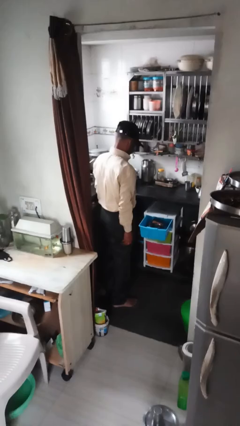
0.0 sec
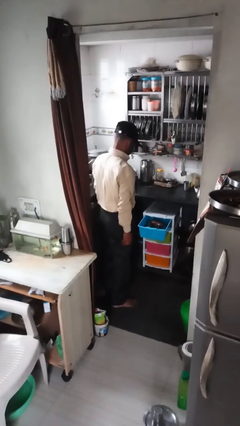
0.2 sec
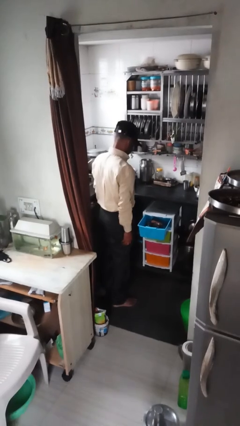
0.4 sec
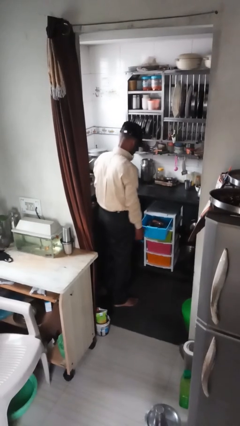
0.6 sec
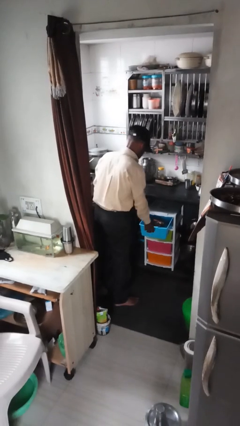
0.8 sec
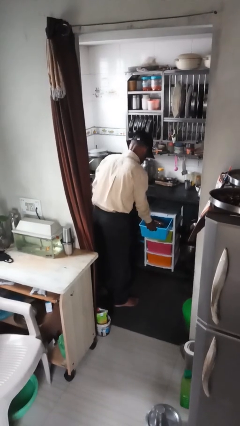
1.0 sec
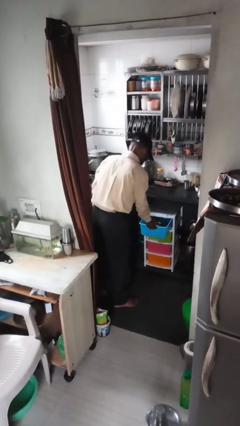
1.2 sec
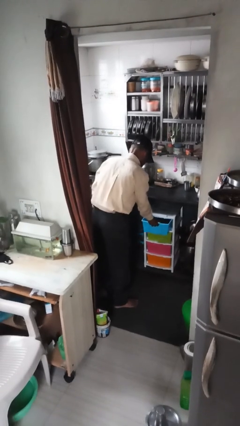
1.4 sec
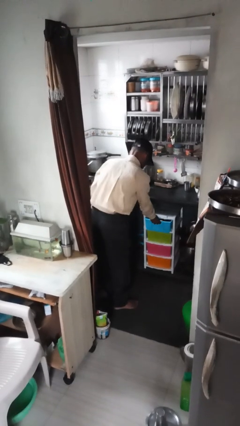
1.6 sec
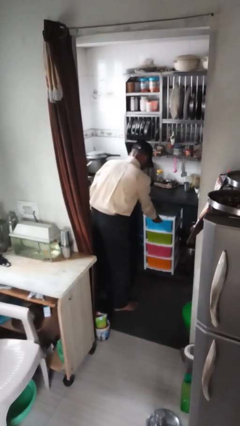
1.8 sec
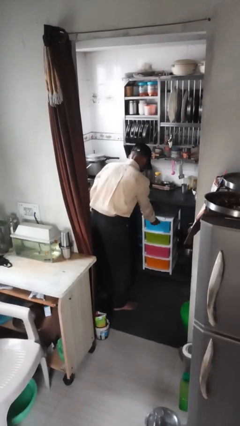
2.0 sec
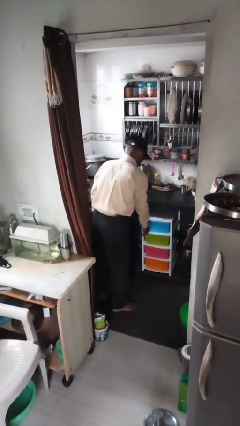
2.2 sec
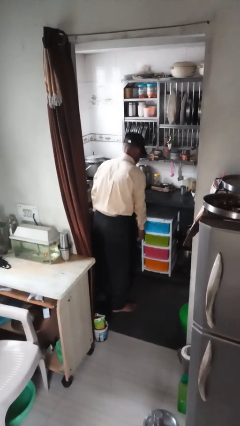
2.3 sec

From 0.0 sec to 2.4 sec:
person closes kitchen drawer

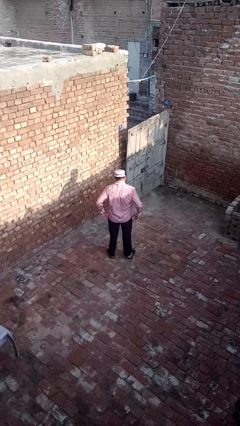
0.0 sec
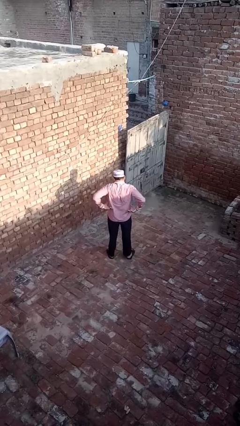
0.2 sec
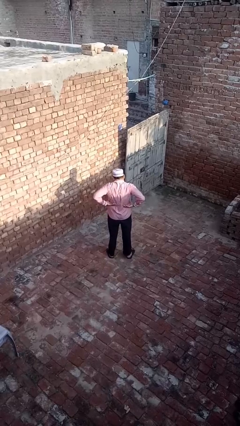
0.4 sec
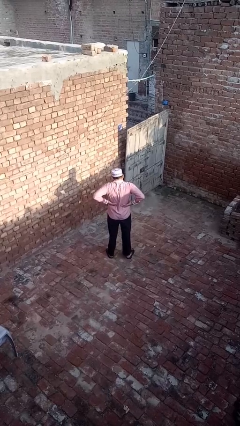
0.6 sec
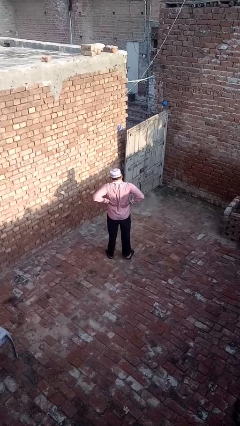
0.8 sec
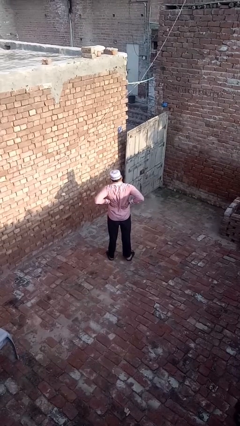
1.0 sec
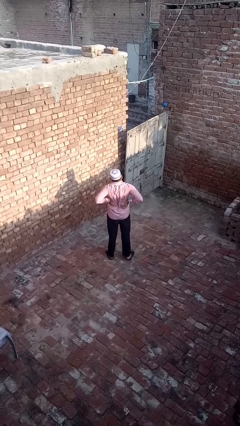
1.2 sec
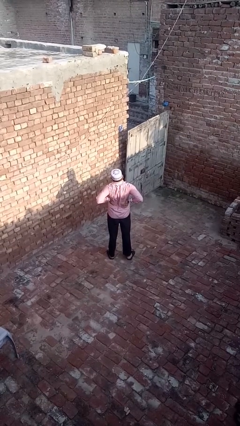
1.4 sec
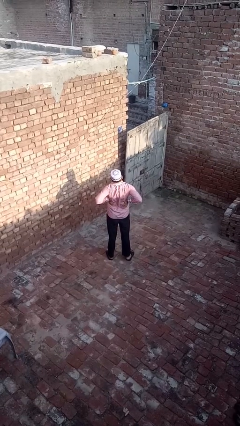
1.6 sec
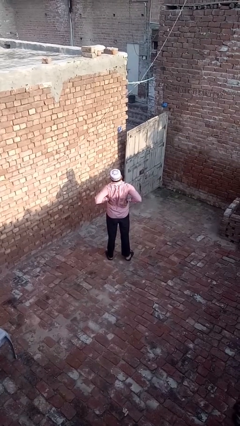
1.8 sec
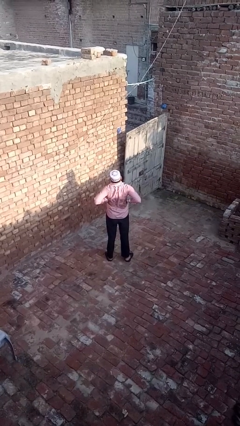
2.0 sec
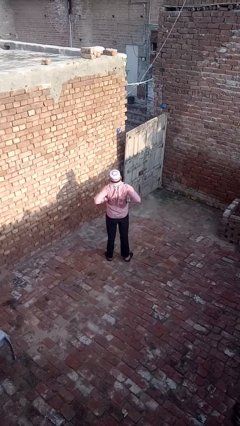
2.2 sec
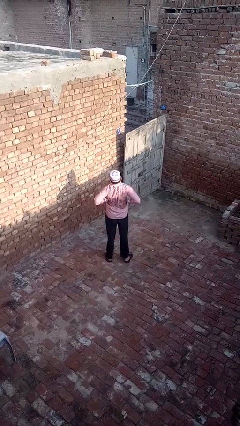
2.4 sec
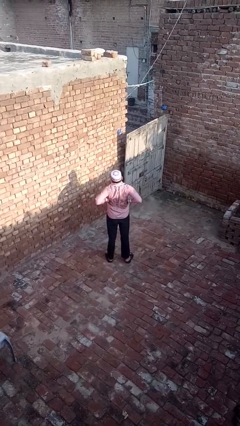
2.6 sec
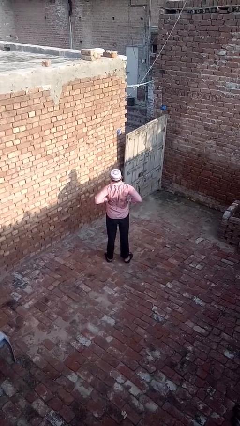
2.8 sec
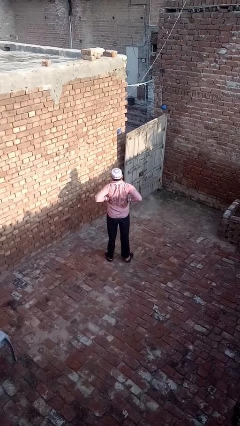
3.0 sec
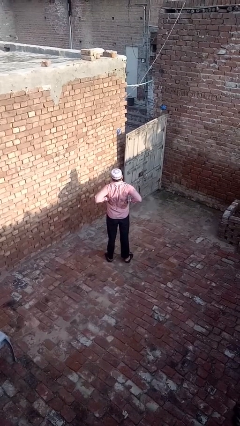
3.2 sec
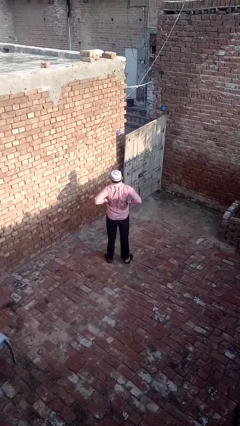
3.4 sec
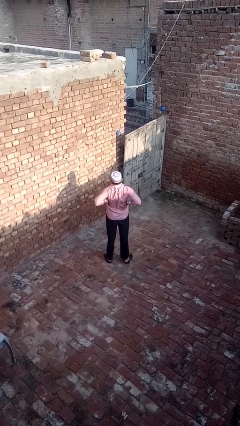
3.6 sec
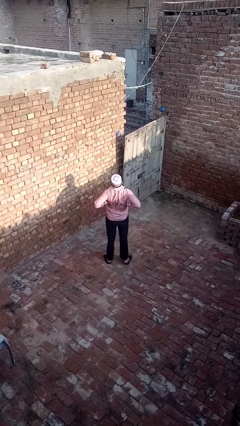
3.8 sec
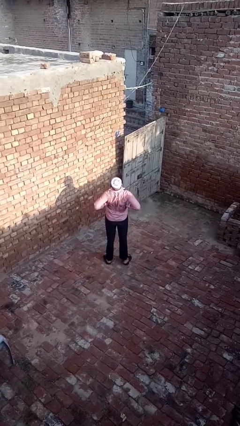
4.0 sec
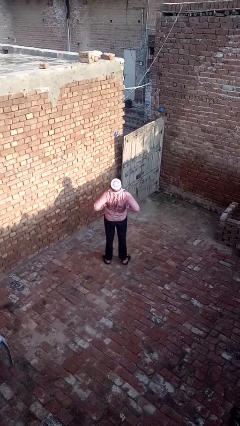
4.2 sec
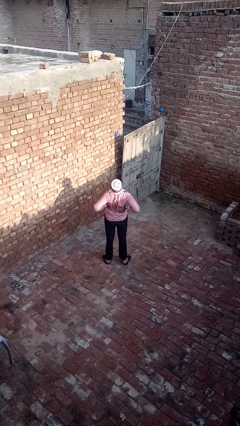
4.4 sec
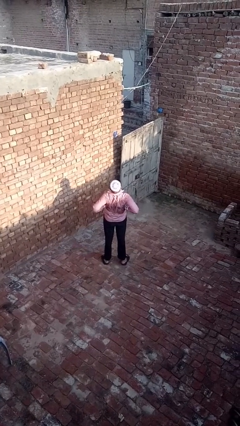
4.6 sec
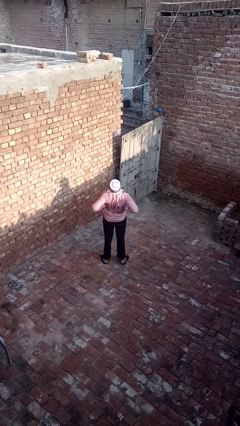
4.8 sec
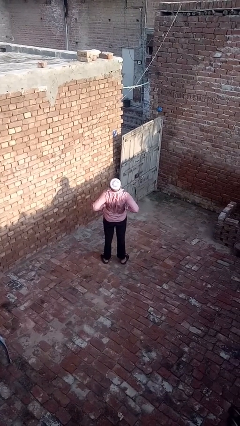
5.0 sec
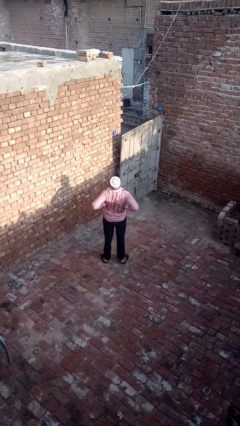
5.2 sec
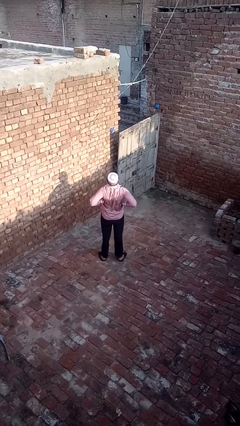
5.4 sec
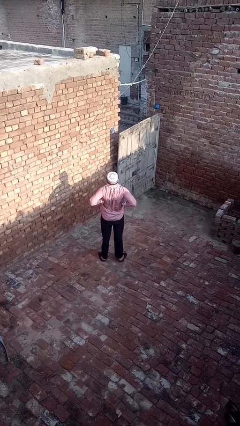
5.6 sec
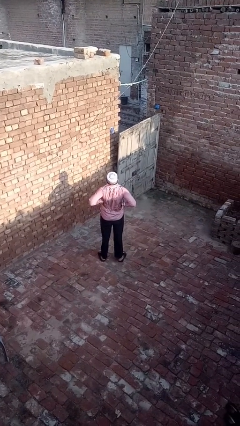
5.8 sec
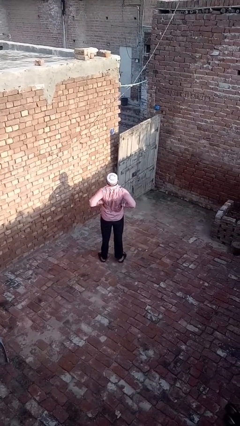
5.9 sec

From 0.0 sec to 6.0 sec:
person stretches back

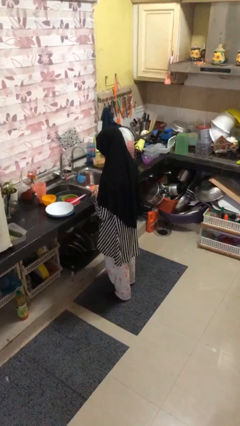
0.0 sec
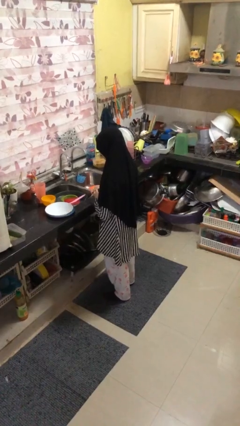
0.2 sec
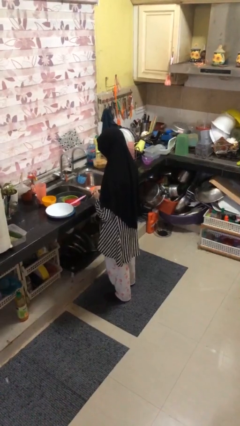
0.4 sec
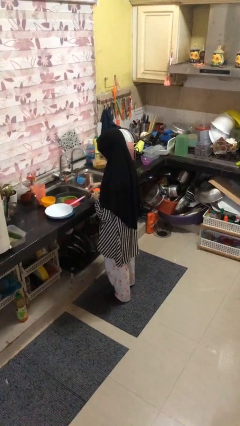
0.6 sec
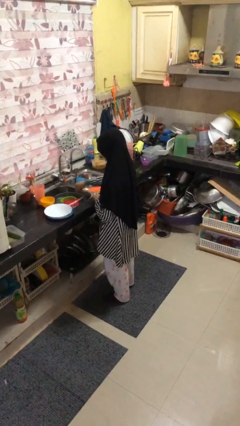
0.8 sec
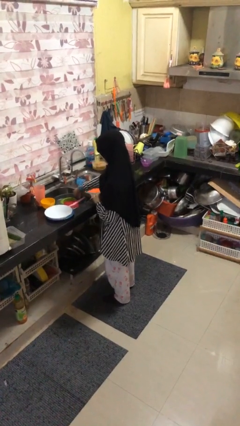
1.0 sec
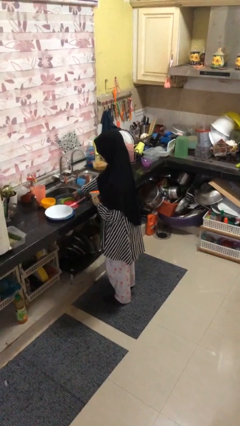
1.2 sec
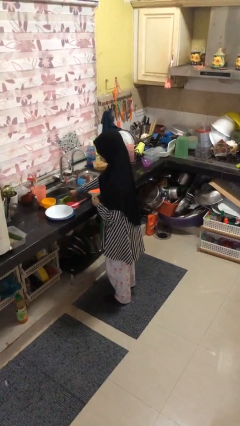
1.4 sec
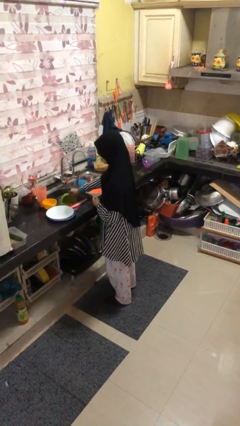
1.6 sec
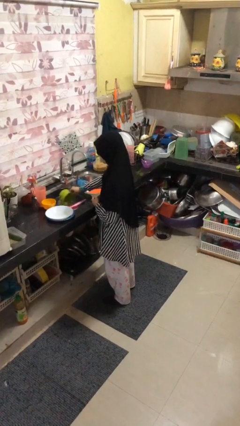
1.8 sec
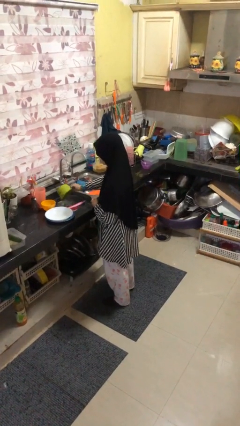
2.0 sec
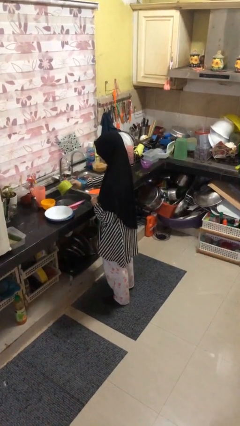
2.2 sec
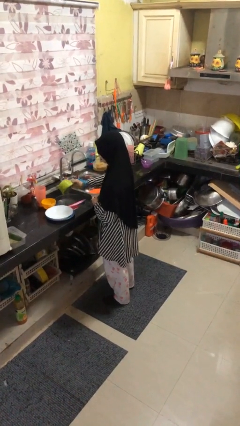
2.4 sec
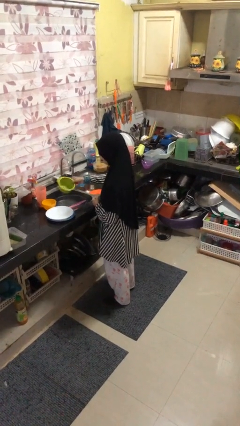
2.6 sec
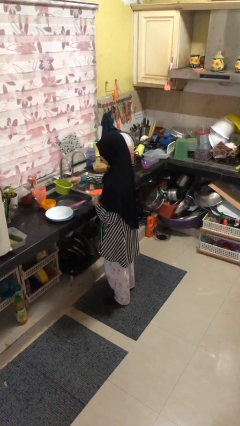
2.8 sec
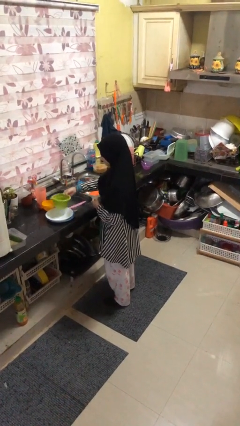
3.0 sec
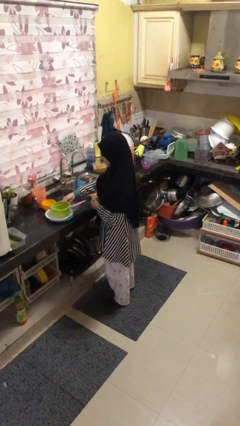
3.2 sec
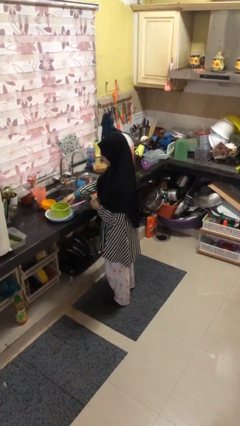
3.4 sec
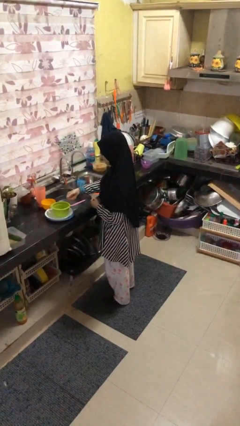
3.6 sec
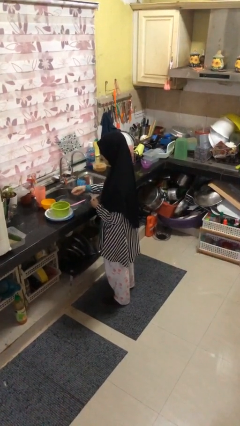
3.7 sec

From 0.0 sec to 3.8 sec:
person unloads dishwasher

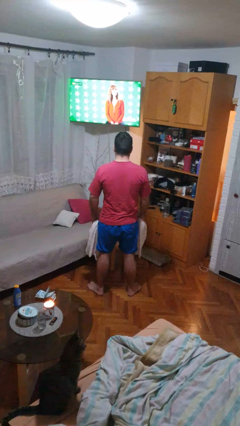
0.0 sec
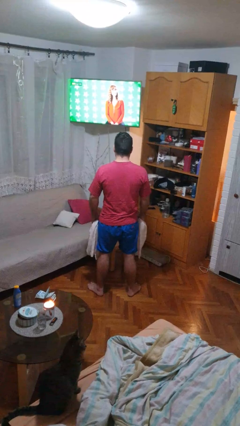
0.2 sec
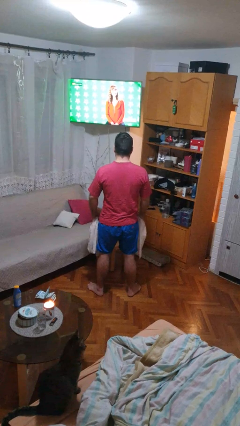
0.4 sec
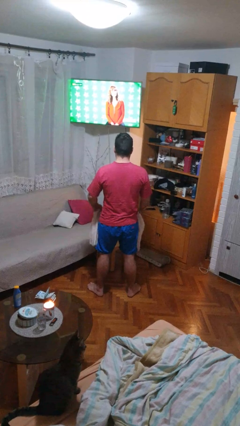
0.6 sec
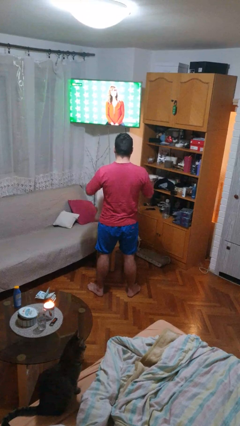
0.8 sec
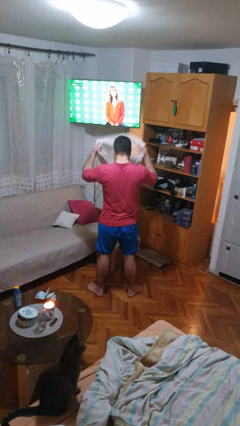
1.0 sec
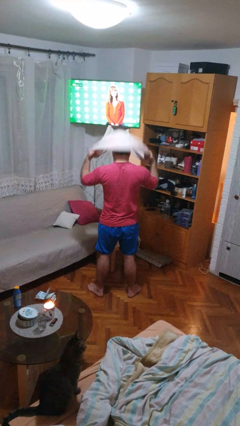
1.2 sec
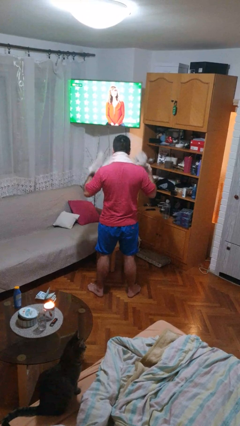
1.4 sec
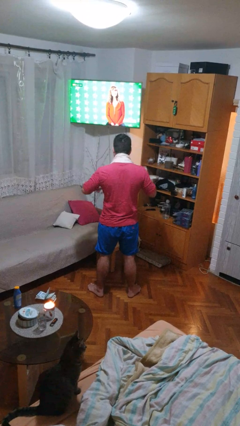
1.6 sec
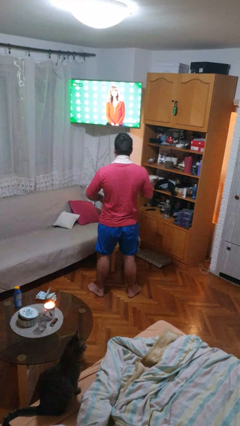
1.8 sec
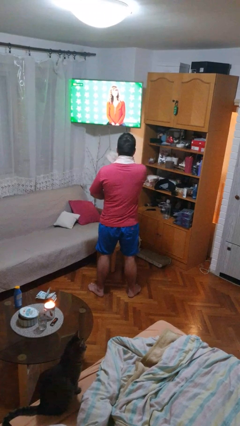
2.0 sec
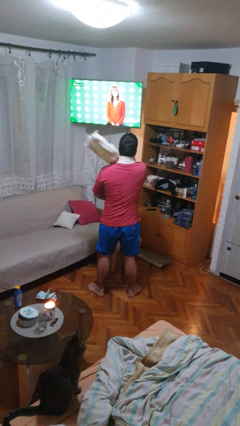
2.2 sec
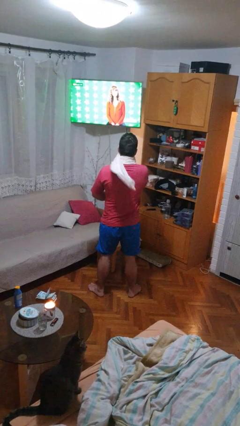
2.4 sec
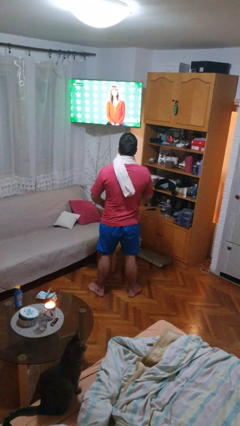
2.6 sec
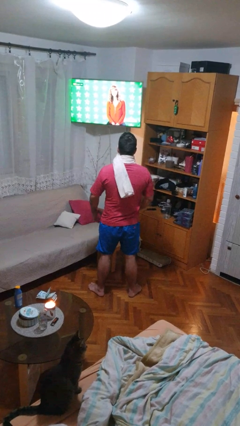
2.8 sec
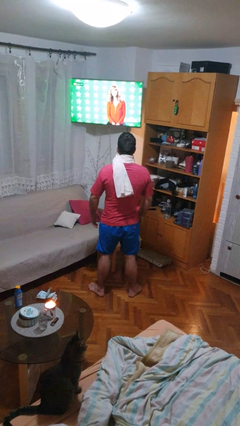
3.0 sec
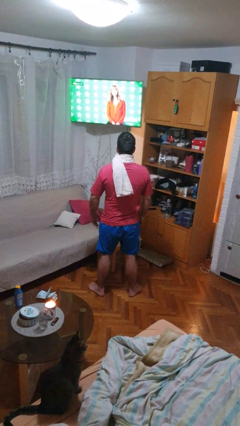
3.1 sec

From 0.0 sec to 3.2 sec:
person puts on scarf

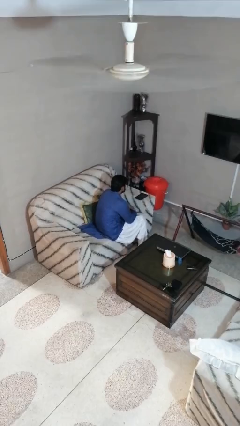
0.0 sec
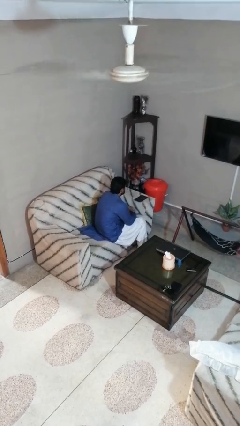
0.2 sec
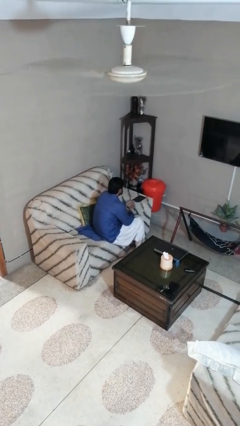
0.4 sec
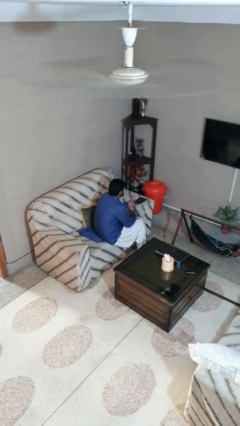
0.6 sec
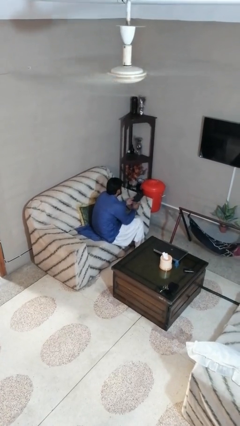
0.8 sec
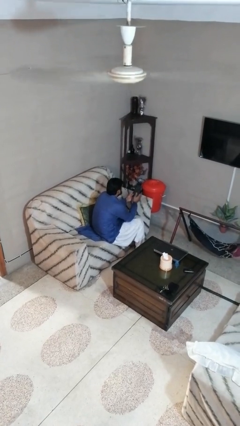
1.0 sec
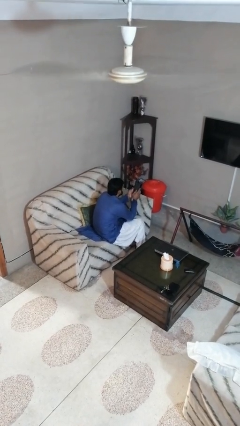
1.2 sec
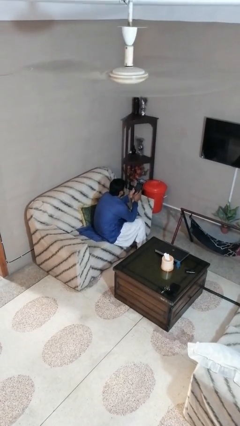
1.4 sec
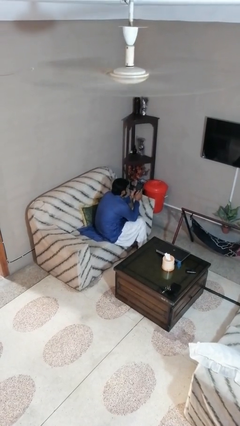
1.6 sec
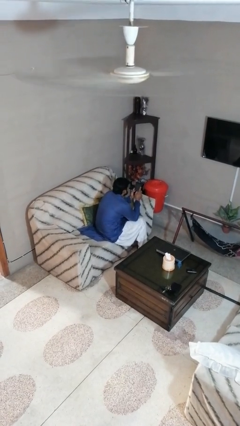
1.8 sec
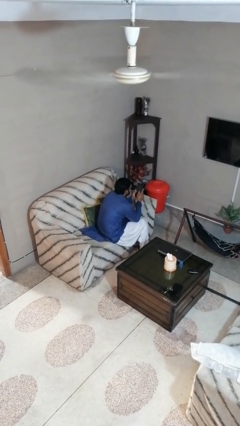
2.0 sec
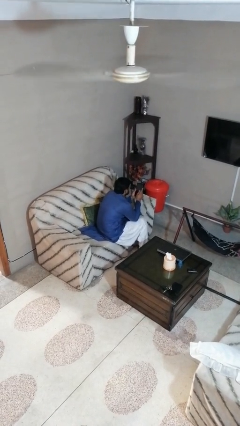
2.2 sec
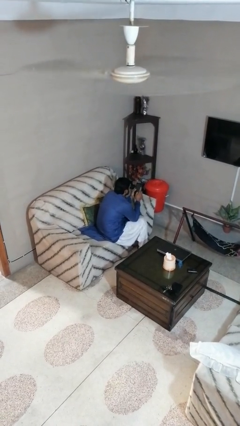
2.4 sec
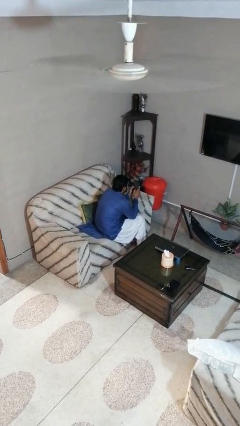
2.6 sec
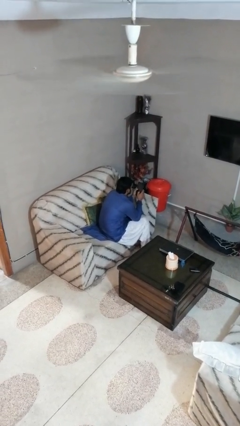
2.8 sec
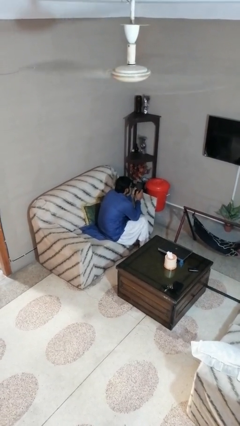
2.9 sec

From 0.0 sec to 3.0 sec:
person interacts with tablet
